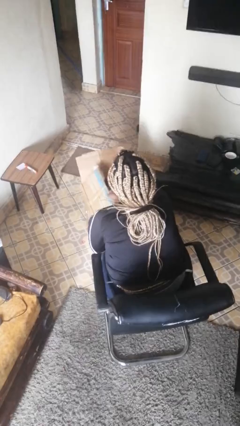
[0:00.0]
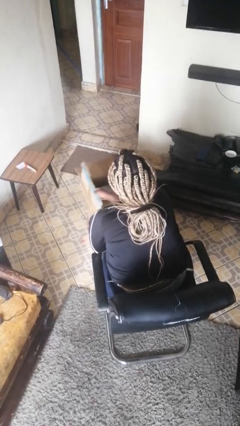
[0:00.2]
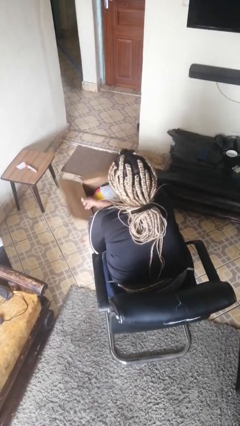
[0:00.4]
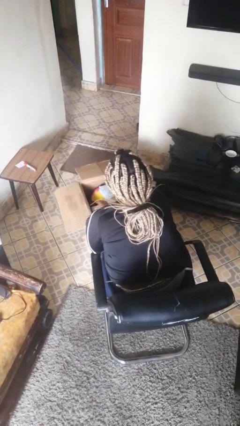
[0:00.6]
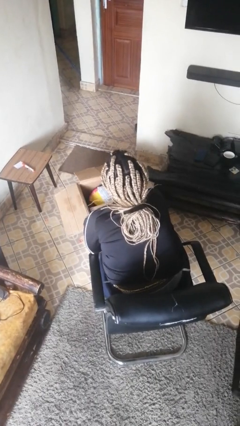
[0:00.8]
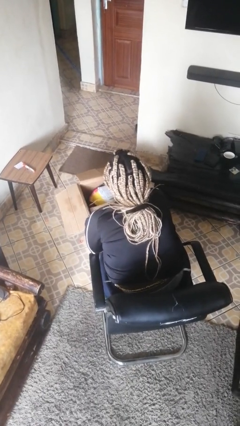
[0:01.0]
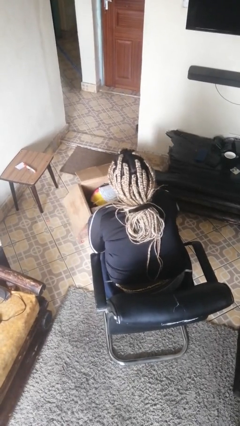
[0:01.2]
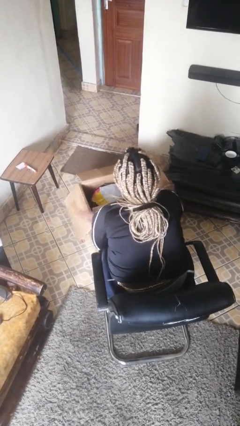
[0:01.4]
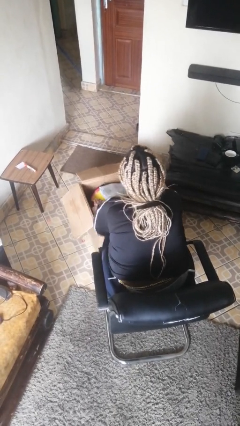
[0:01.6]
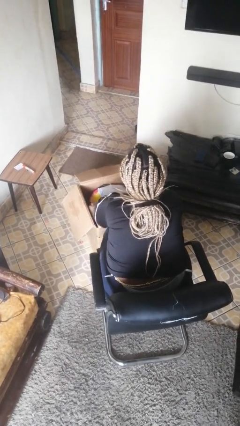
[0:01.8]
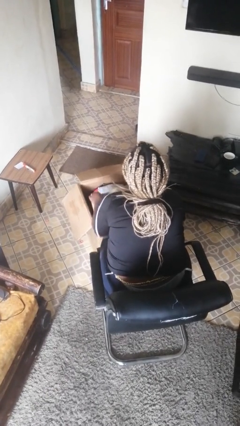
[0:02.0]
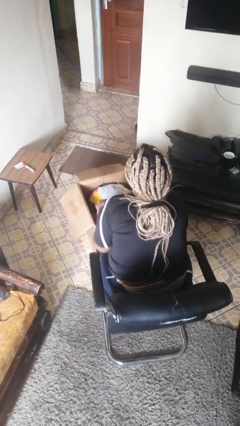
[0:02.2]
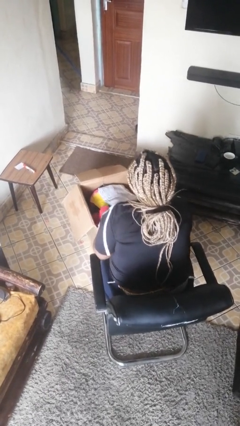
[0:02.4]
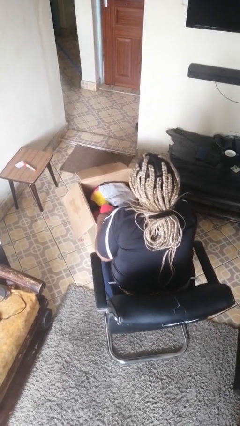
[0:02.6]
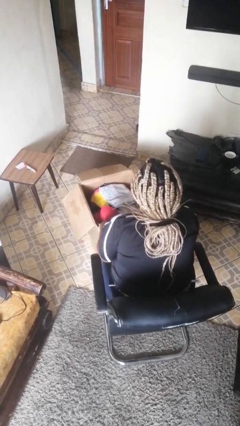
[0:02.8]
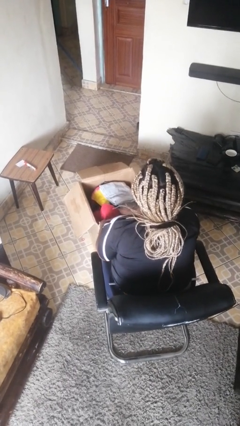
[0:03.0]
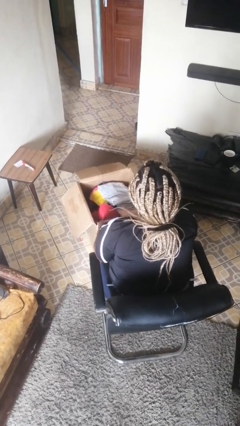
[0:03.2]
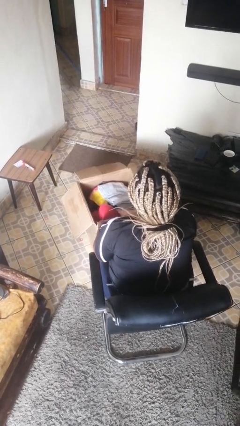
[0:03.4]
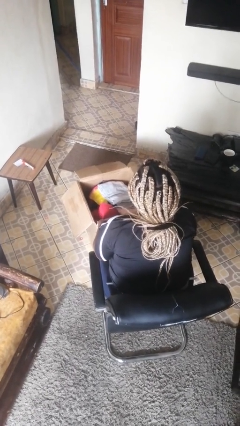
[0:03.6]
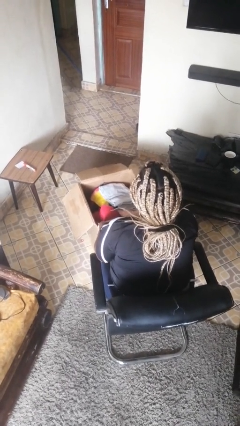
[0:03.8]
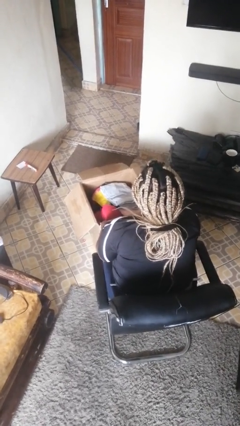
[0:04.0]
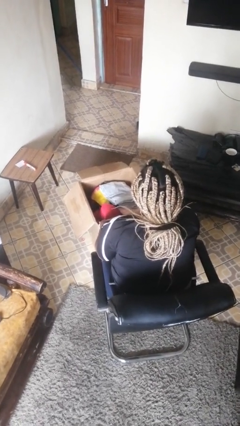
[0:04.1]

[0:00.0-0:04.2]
person opens box

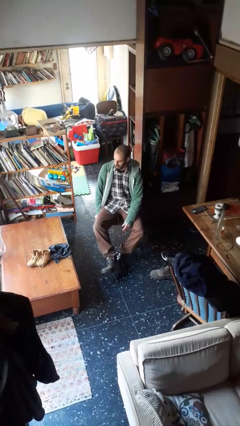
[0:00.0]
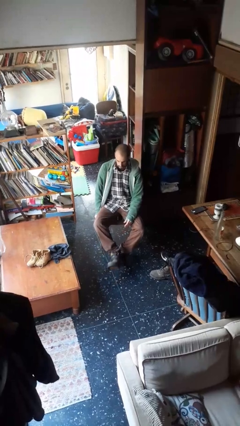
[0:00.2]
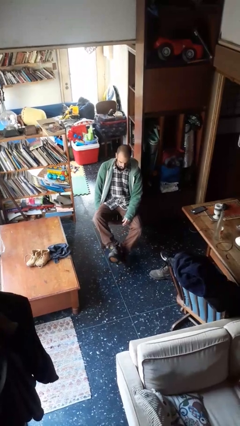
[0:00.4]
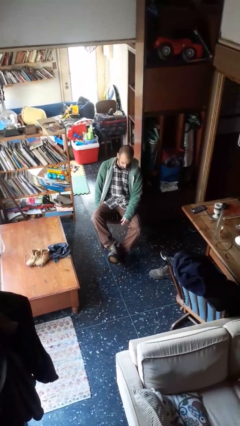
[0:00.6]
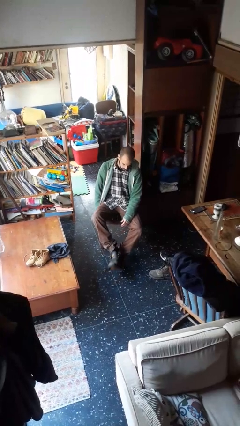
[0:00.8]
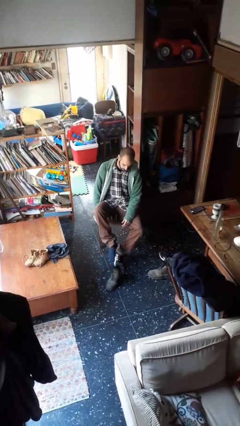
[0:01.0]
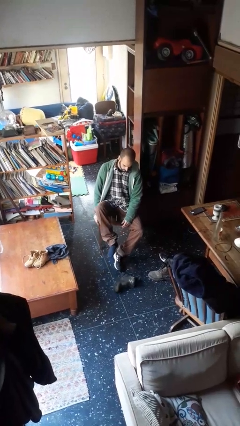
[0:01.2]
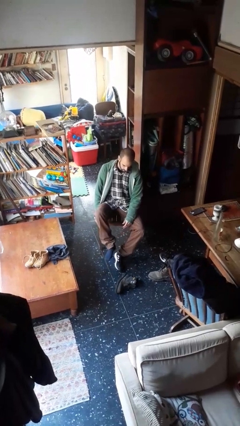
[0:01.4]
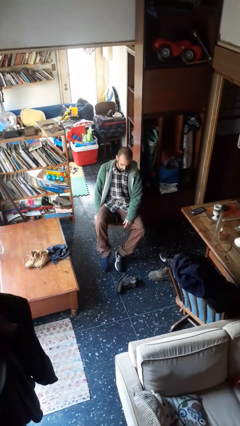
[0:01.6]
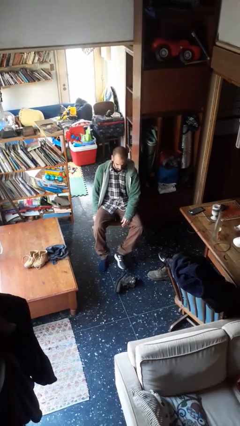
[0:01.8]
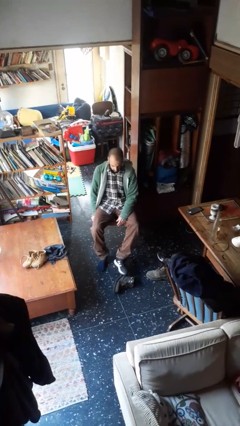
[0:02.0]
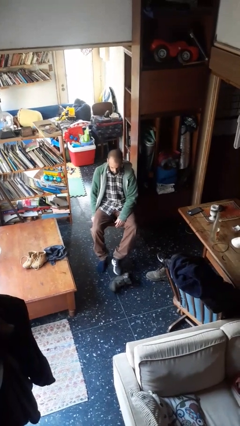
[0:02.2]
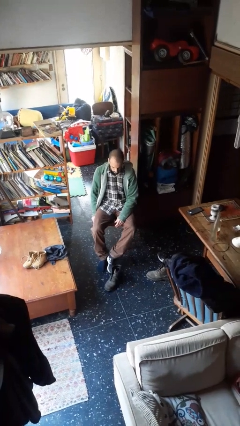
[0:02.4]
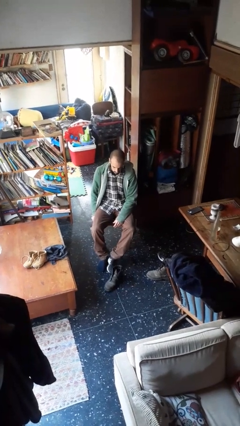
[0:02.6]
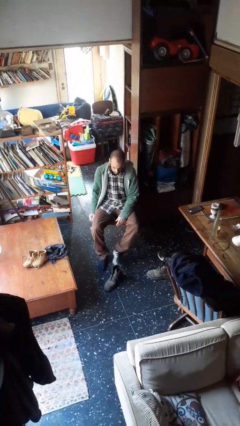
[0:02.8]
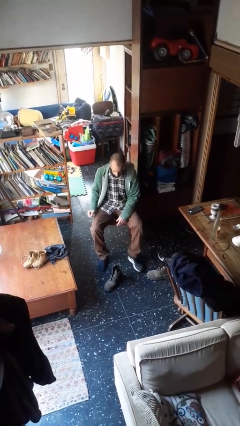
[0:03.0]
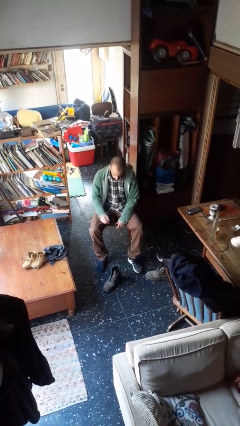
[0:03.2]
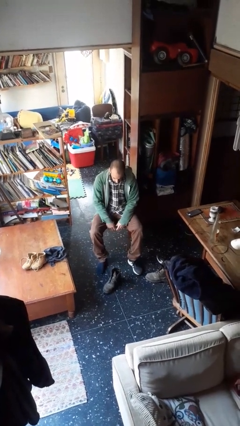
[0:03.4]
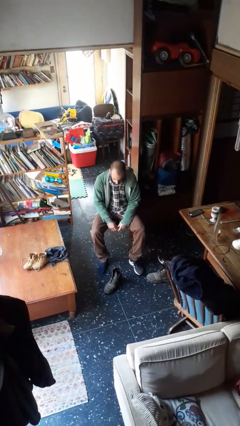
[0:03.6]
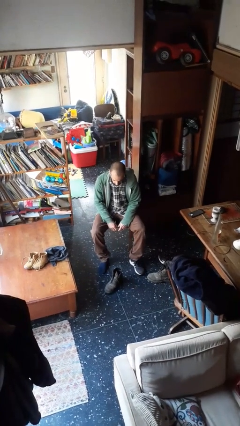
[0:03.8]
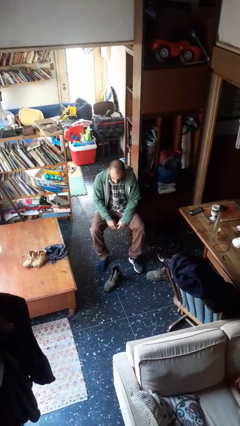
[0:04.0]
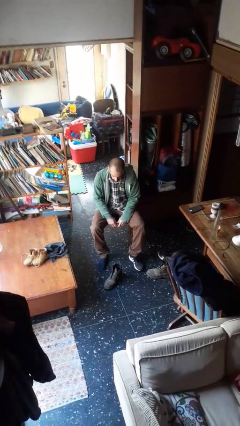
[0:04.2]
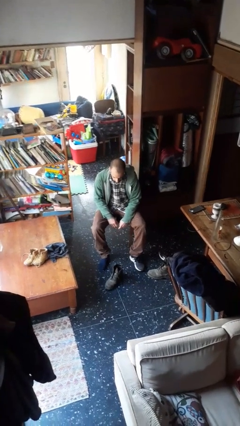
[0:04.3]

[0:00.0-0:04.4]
person takes off boots

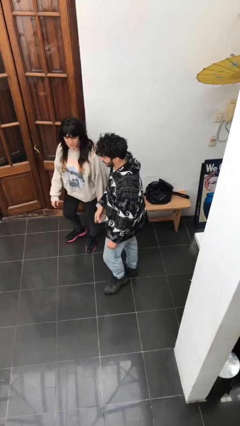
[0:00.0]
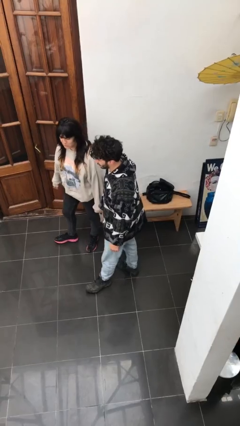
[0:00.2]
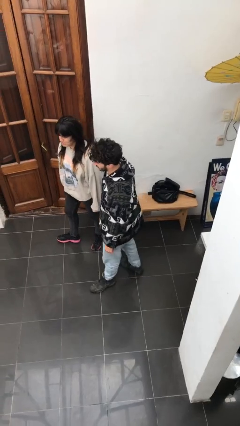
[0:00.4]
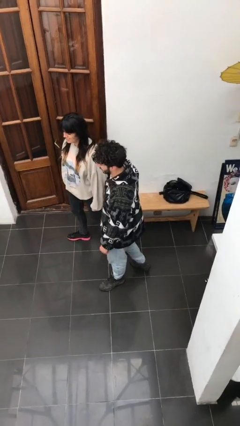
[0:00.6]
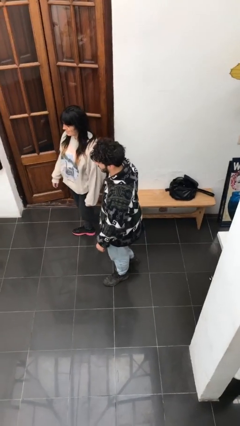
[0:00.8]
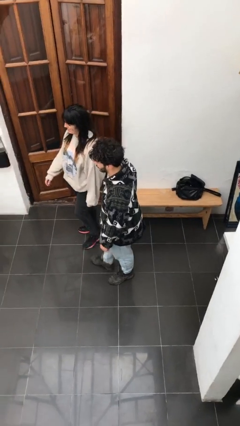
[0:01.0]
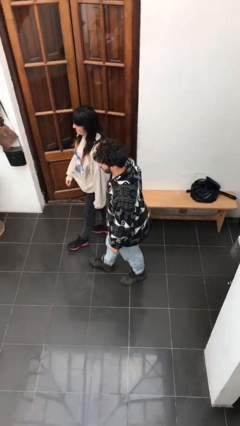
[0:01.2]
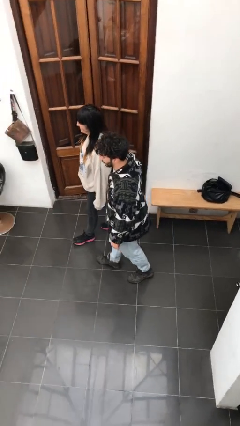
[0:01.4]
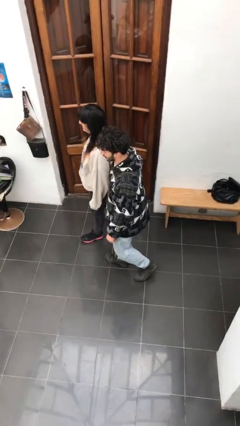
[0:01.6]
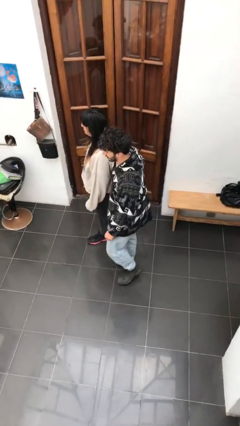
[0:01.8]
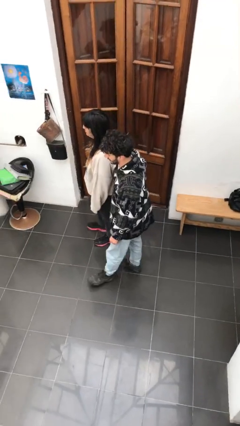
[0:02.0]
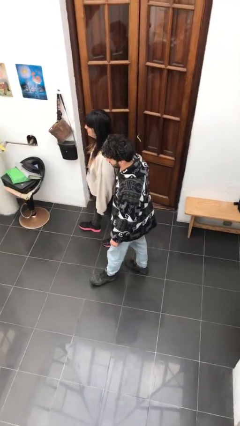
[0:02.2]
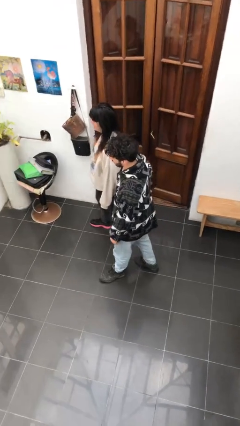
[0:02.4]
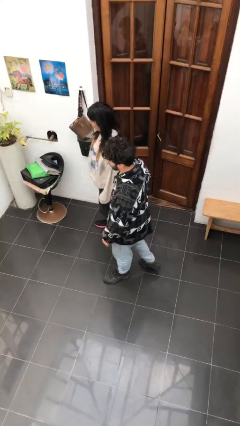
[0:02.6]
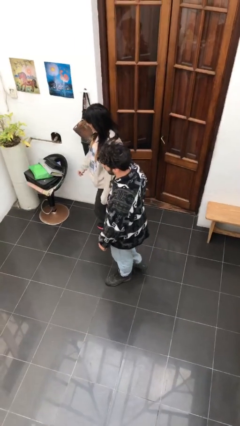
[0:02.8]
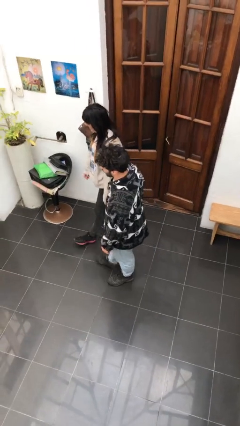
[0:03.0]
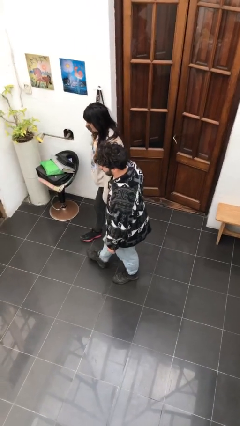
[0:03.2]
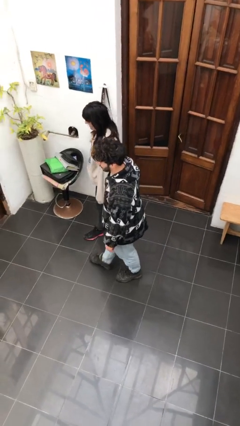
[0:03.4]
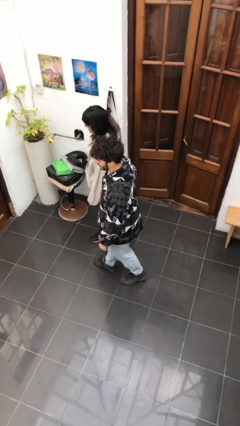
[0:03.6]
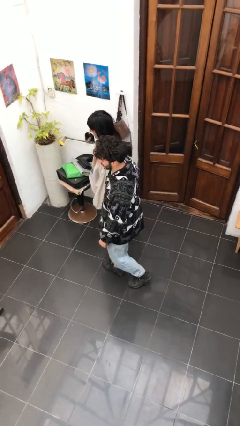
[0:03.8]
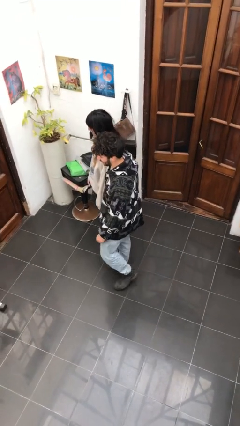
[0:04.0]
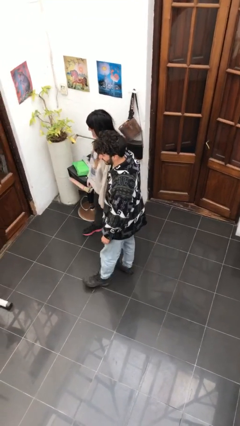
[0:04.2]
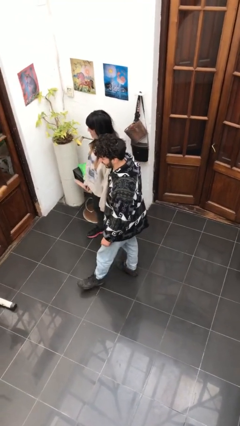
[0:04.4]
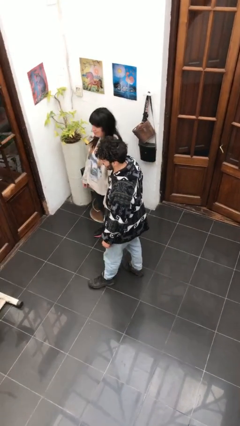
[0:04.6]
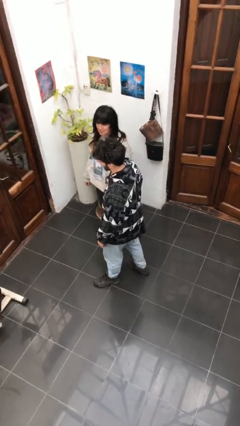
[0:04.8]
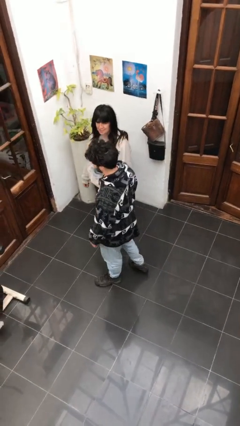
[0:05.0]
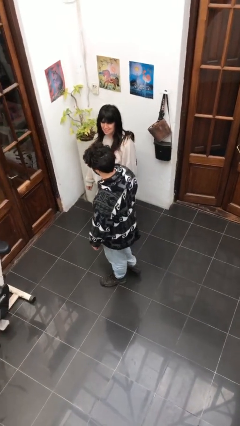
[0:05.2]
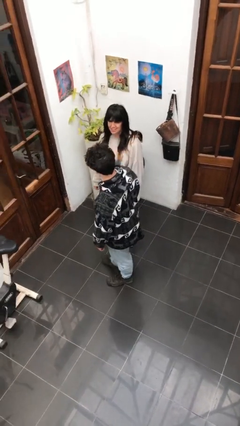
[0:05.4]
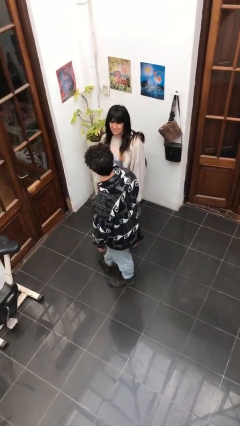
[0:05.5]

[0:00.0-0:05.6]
person talks to person

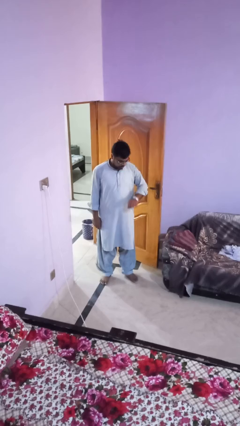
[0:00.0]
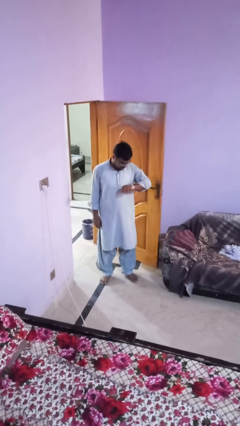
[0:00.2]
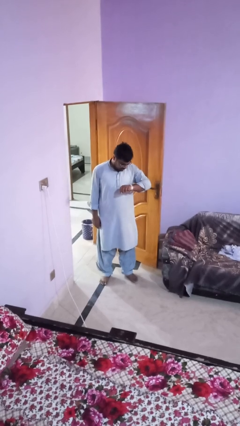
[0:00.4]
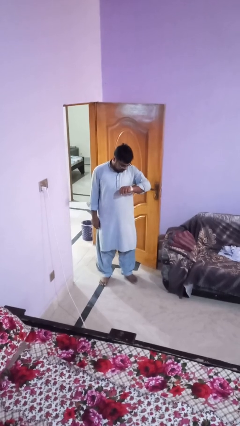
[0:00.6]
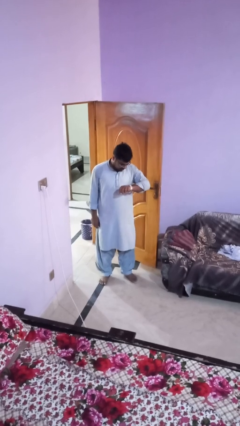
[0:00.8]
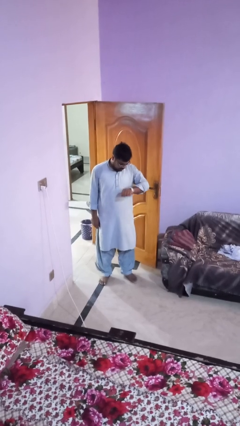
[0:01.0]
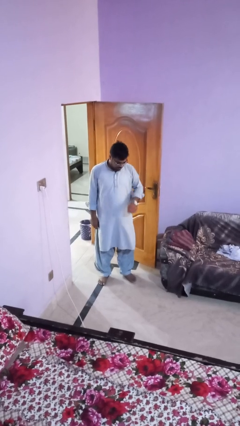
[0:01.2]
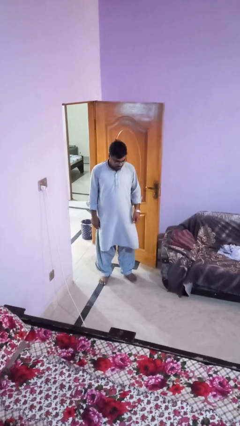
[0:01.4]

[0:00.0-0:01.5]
person looks at wristwatch

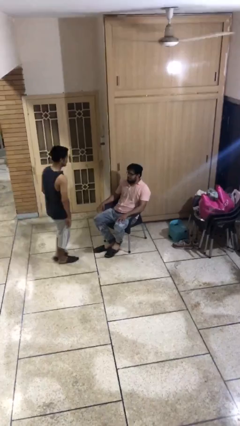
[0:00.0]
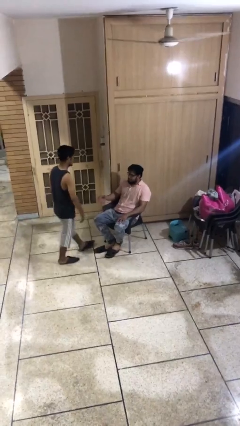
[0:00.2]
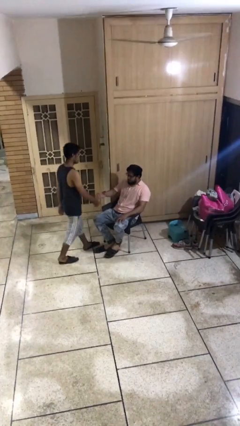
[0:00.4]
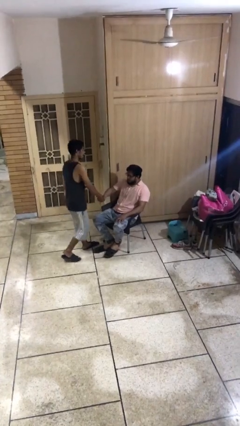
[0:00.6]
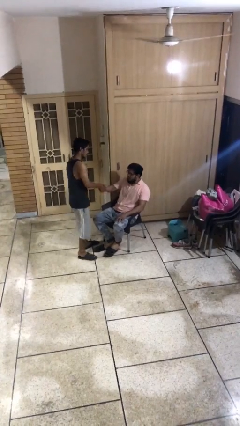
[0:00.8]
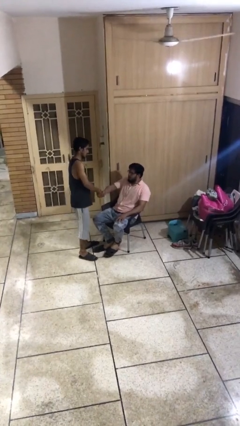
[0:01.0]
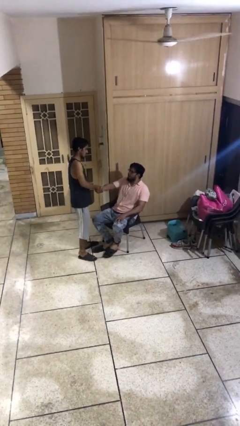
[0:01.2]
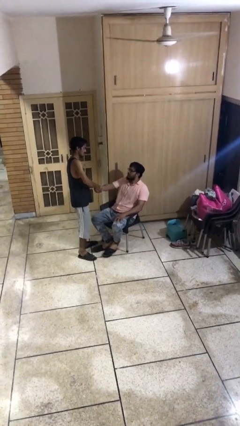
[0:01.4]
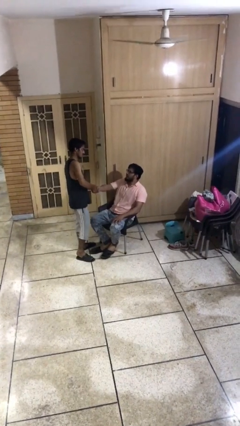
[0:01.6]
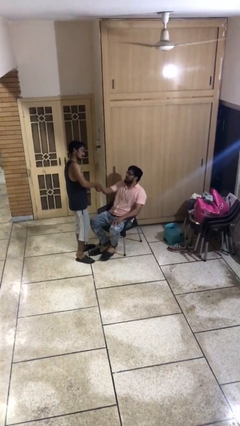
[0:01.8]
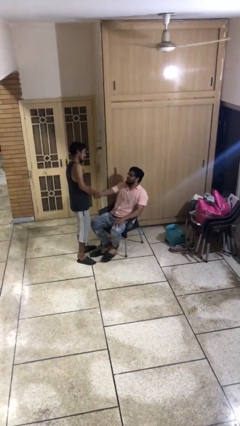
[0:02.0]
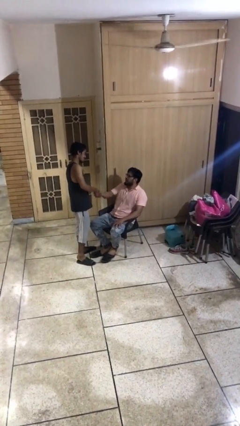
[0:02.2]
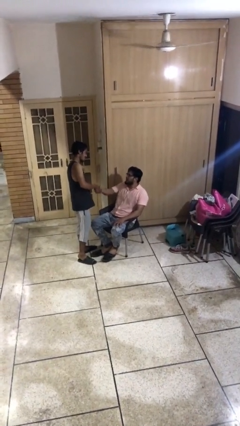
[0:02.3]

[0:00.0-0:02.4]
person shakes hand
